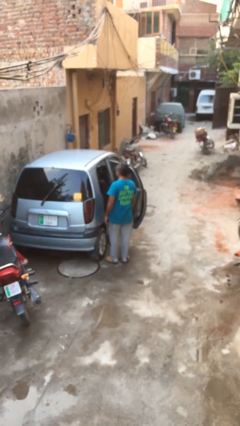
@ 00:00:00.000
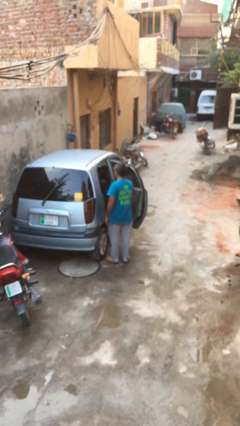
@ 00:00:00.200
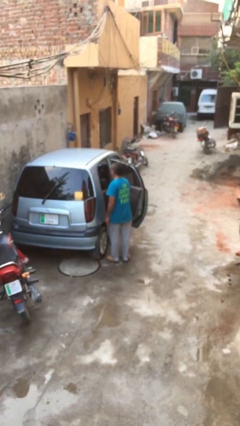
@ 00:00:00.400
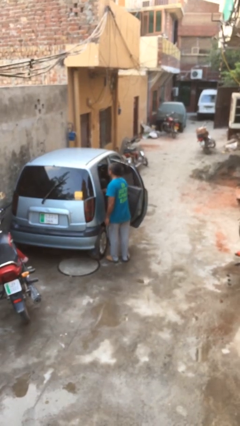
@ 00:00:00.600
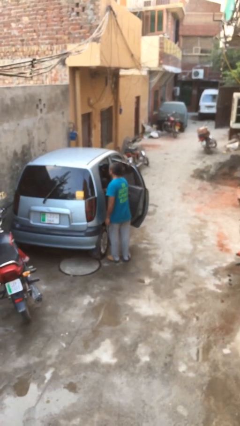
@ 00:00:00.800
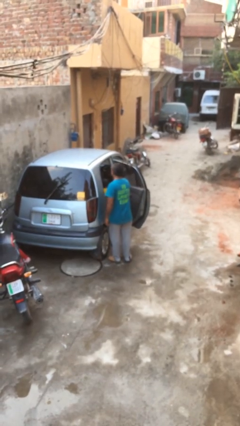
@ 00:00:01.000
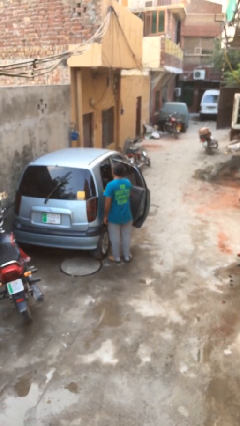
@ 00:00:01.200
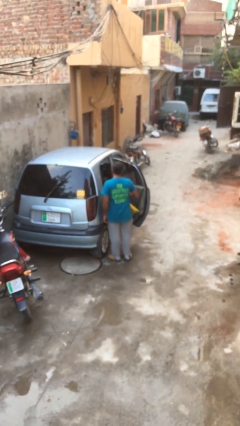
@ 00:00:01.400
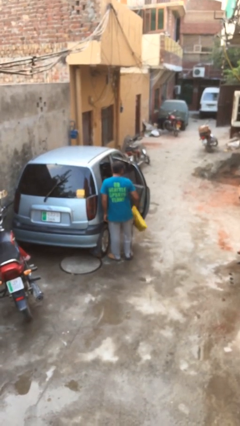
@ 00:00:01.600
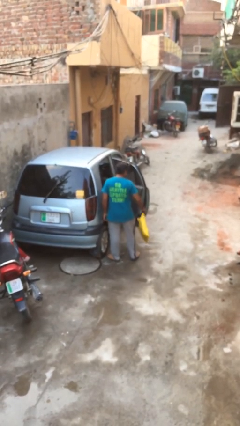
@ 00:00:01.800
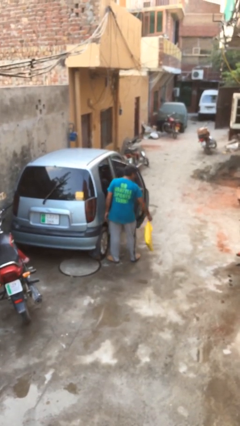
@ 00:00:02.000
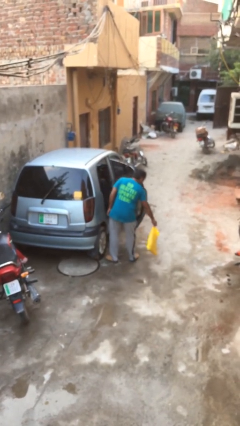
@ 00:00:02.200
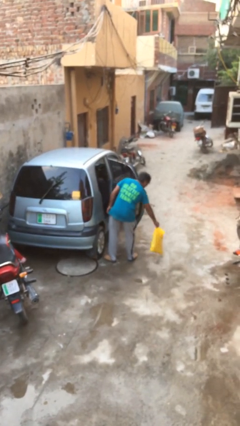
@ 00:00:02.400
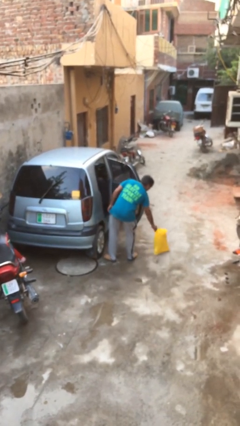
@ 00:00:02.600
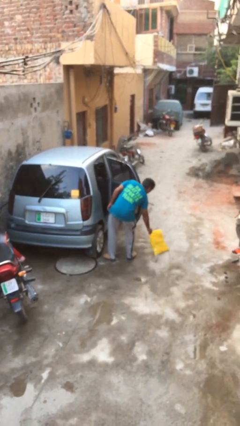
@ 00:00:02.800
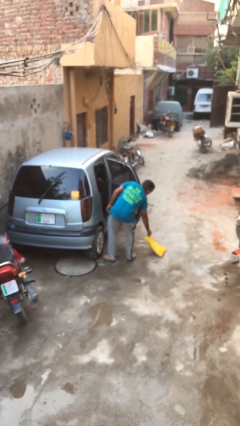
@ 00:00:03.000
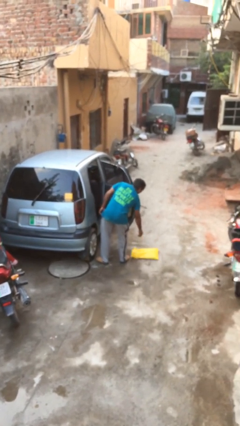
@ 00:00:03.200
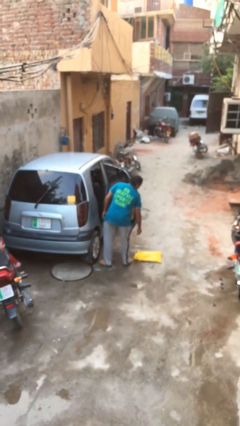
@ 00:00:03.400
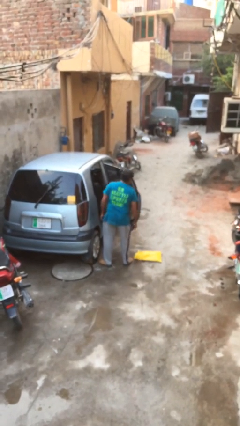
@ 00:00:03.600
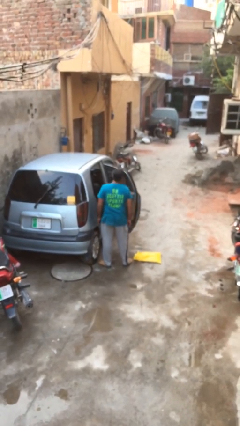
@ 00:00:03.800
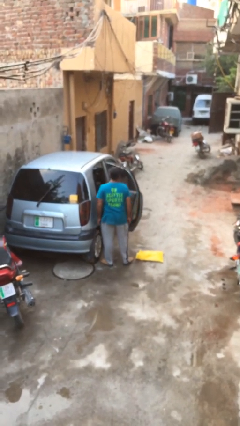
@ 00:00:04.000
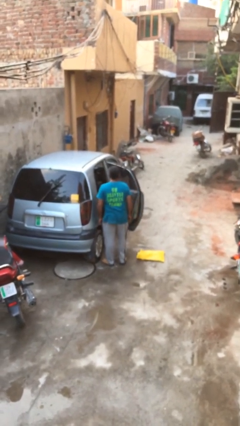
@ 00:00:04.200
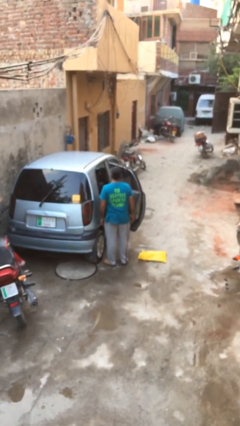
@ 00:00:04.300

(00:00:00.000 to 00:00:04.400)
person unloads car

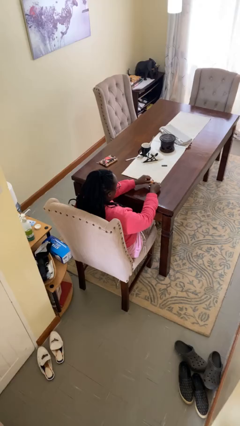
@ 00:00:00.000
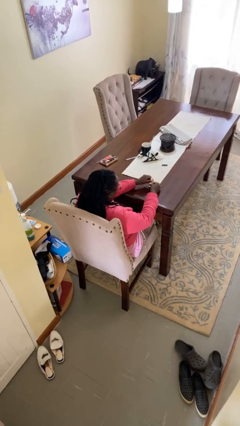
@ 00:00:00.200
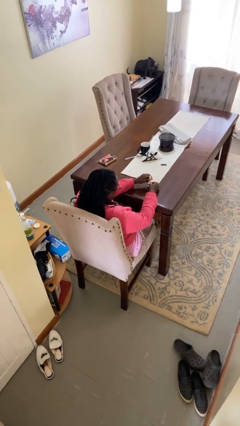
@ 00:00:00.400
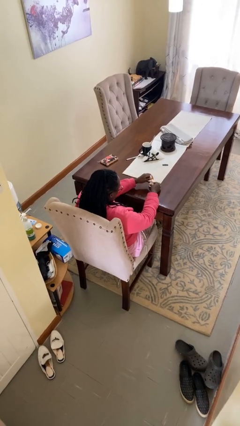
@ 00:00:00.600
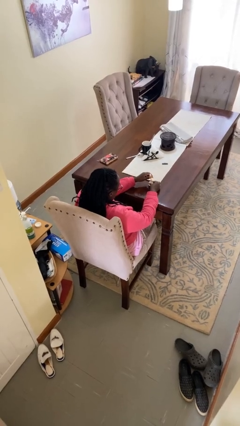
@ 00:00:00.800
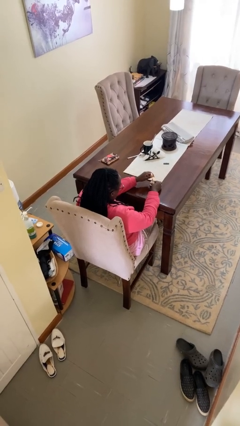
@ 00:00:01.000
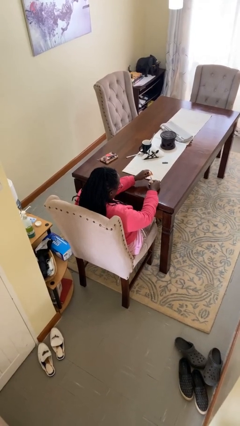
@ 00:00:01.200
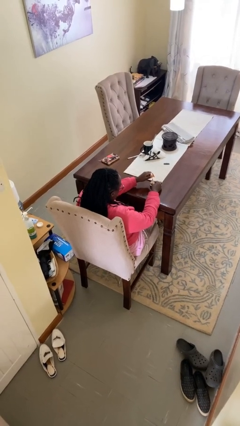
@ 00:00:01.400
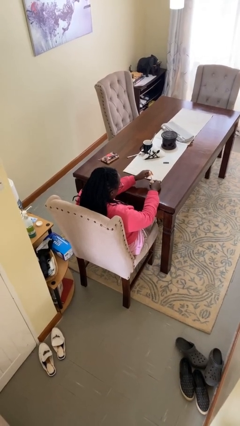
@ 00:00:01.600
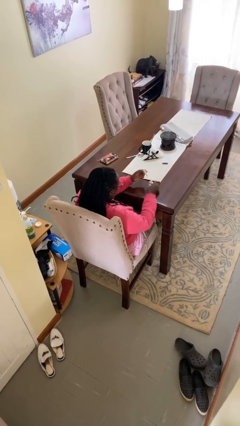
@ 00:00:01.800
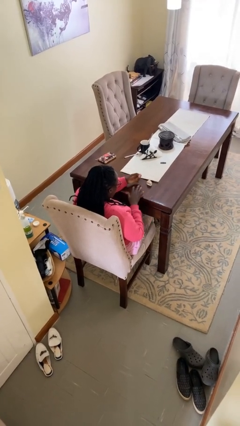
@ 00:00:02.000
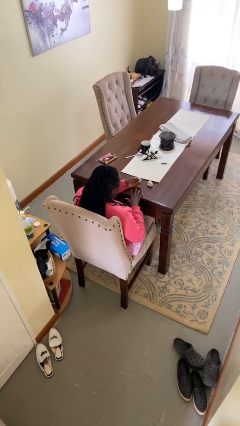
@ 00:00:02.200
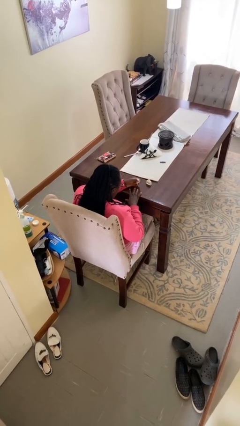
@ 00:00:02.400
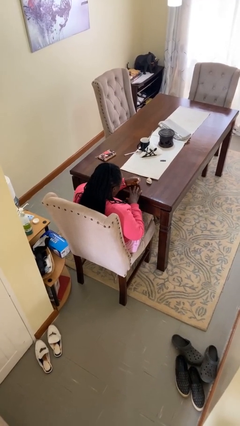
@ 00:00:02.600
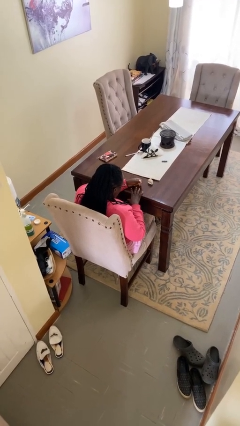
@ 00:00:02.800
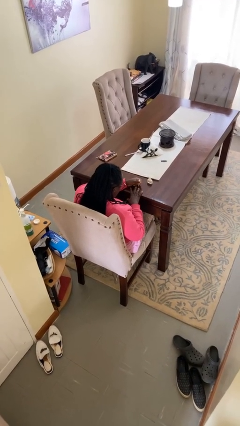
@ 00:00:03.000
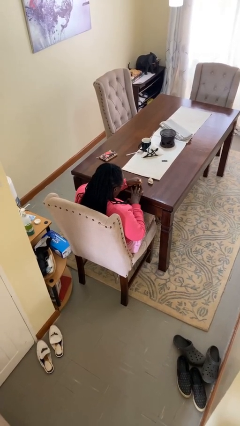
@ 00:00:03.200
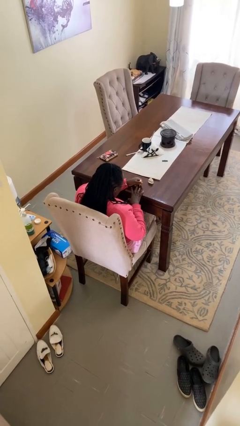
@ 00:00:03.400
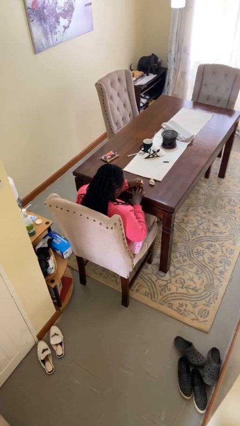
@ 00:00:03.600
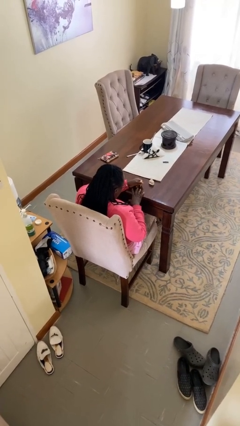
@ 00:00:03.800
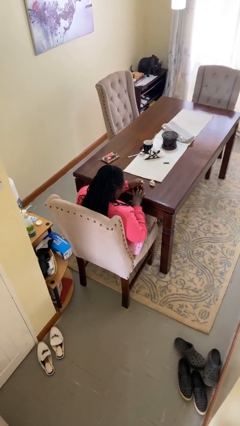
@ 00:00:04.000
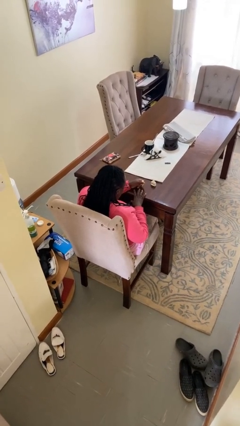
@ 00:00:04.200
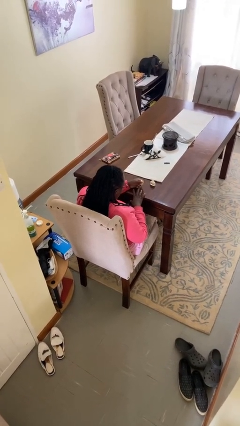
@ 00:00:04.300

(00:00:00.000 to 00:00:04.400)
person paints fingernails

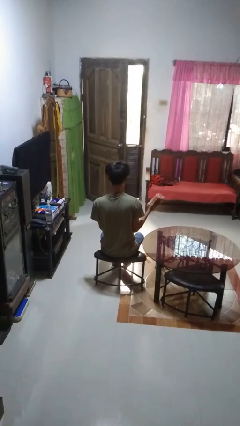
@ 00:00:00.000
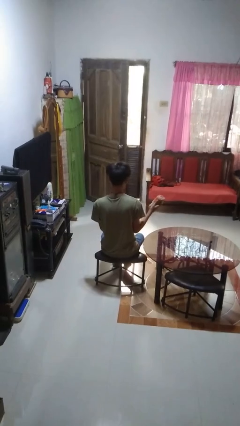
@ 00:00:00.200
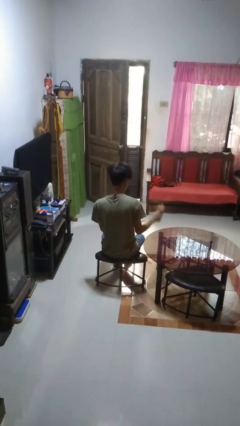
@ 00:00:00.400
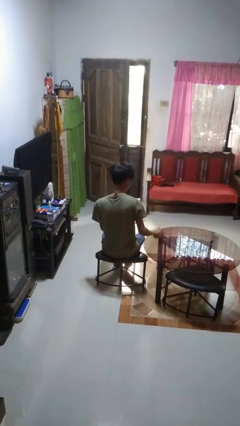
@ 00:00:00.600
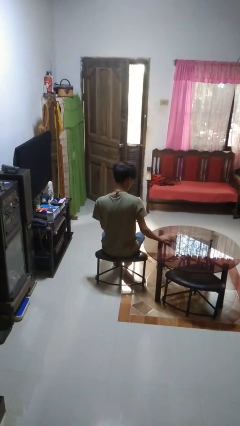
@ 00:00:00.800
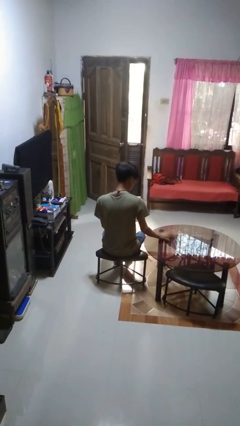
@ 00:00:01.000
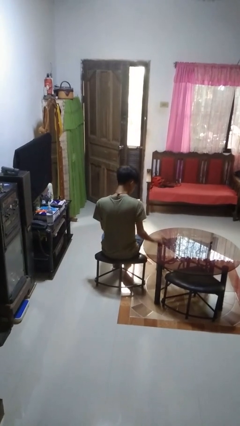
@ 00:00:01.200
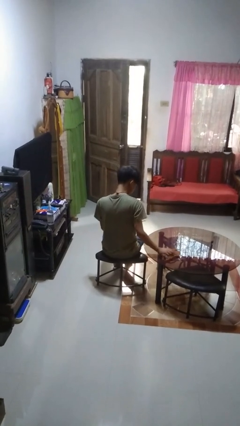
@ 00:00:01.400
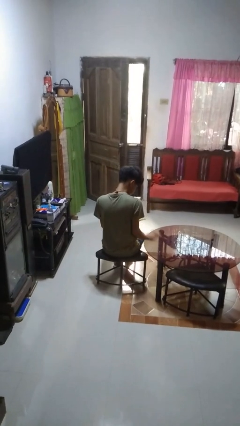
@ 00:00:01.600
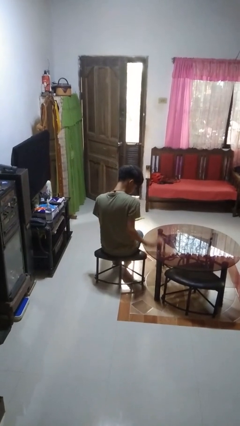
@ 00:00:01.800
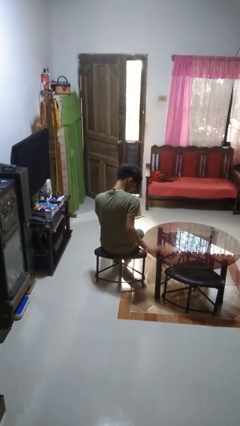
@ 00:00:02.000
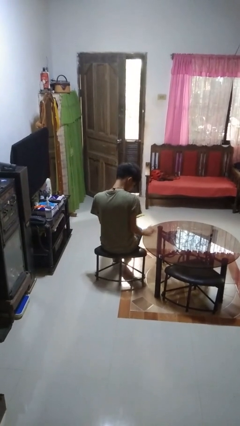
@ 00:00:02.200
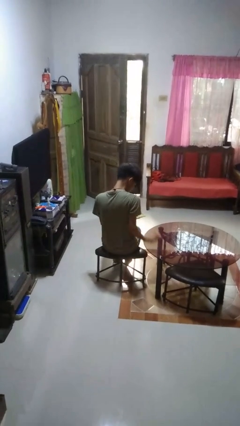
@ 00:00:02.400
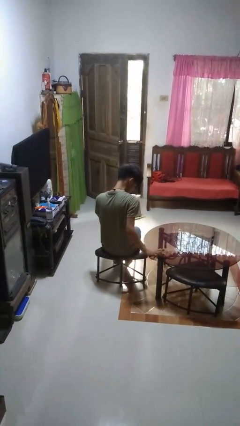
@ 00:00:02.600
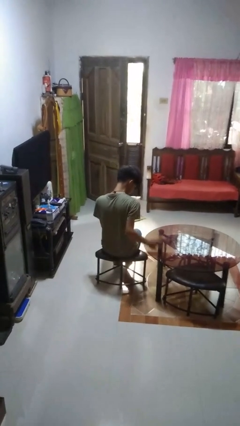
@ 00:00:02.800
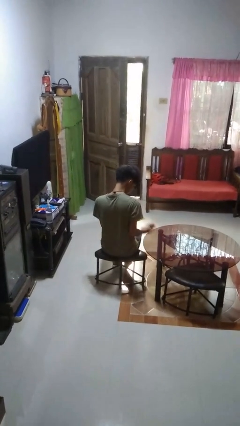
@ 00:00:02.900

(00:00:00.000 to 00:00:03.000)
person cleans table with rag

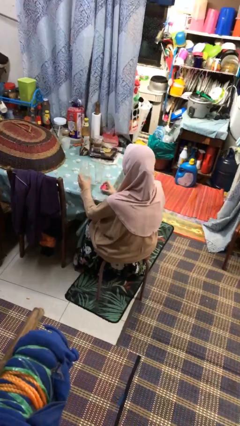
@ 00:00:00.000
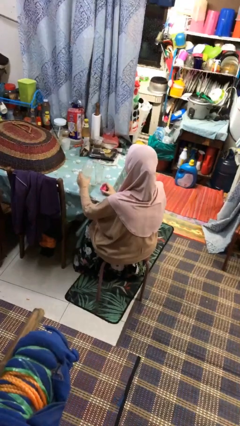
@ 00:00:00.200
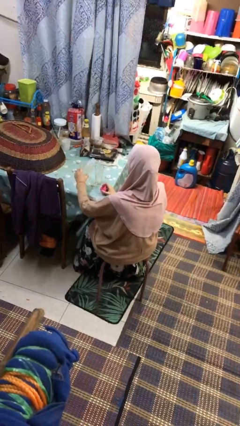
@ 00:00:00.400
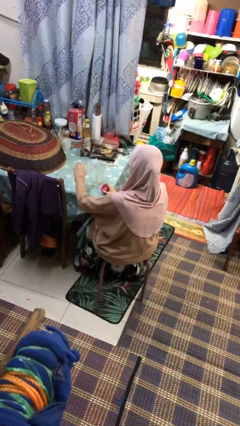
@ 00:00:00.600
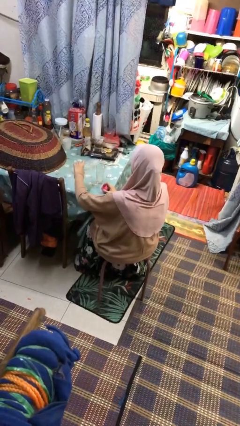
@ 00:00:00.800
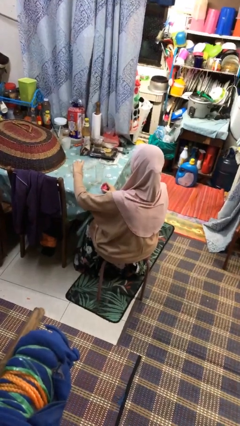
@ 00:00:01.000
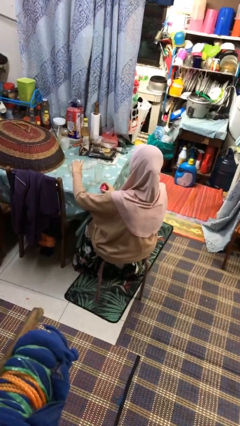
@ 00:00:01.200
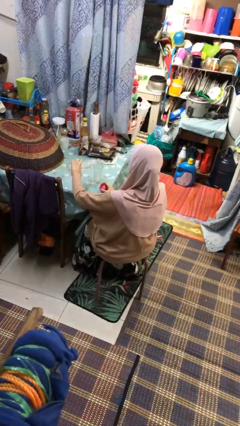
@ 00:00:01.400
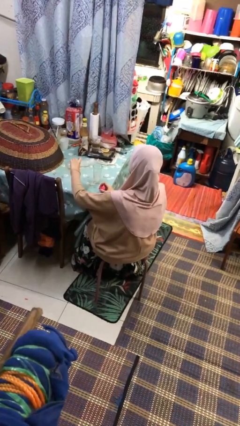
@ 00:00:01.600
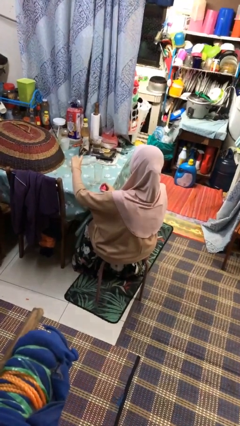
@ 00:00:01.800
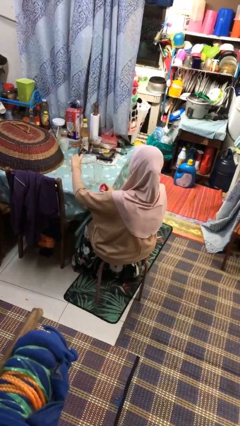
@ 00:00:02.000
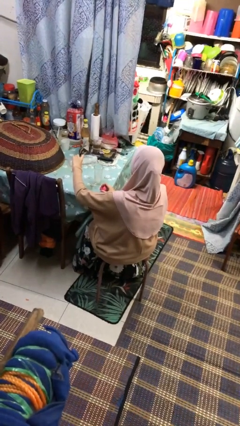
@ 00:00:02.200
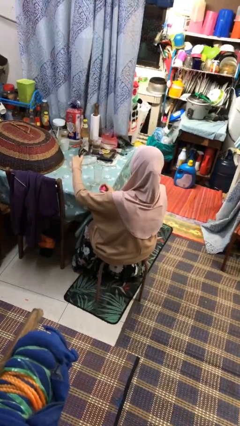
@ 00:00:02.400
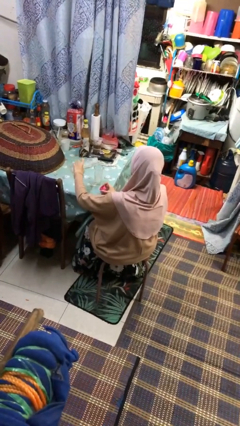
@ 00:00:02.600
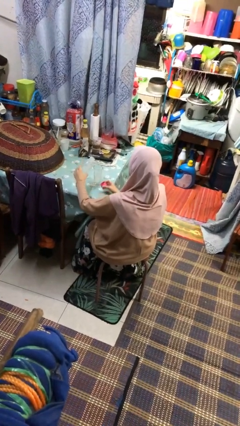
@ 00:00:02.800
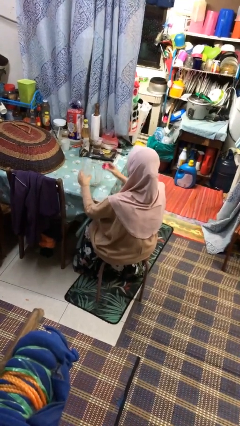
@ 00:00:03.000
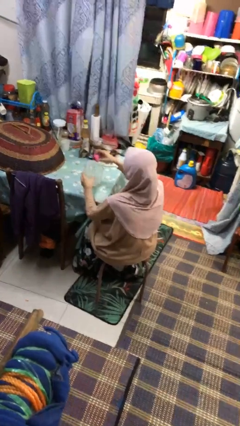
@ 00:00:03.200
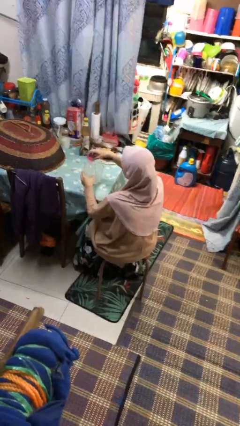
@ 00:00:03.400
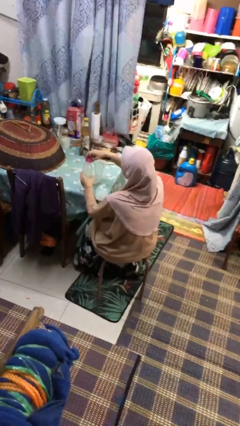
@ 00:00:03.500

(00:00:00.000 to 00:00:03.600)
person pours liquid into cup

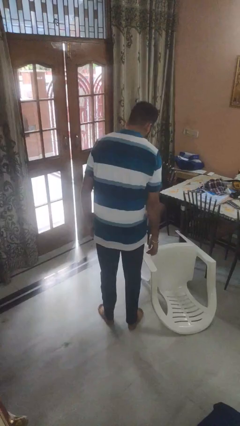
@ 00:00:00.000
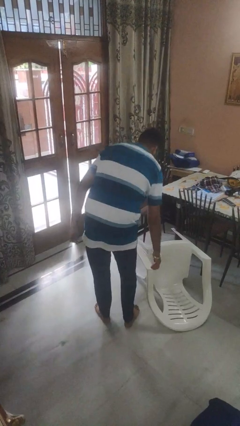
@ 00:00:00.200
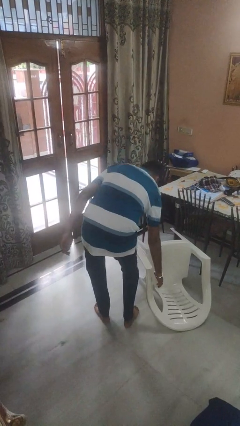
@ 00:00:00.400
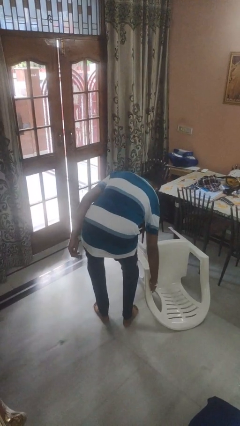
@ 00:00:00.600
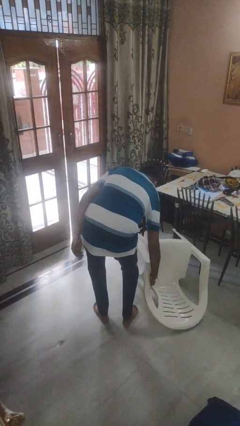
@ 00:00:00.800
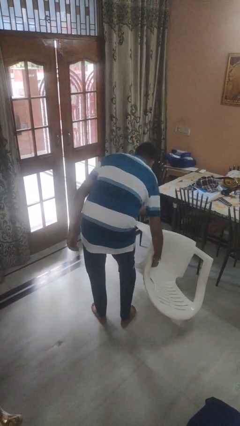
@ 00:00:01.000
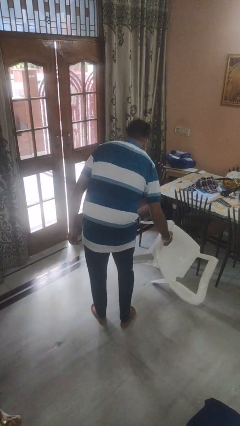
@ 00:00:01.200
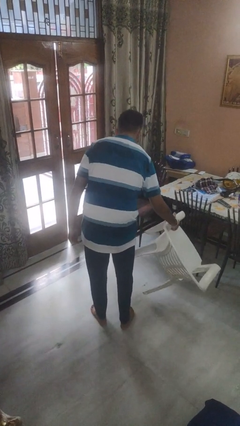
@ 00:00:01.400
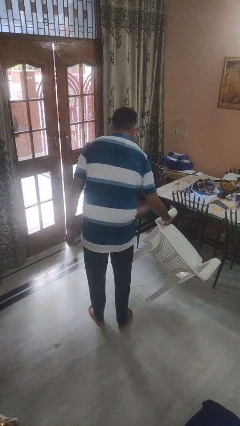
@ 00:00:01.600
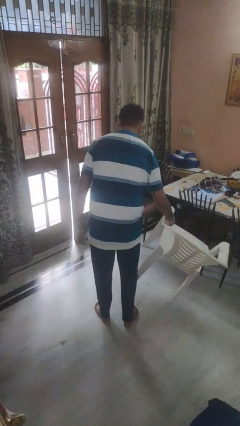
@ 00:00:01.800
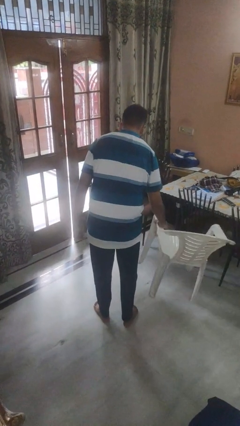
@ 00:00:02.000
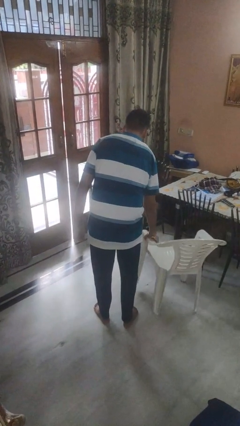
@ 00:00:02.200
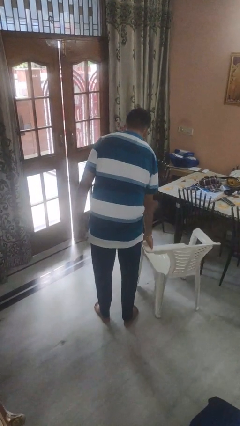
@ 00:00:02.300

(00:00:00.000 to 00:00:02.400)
person sets upright furniture
